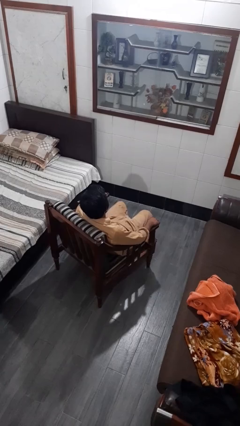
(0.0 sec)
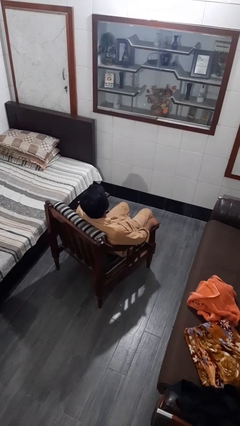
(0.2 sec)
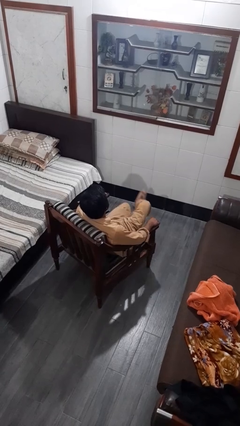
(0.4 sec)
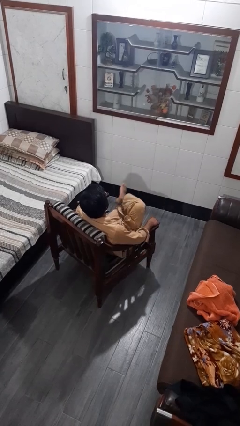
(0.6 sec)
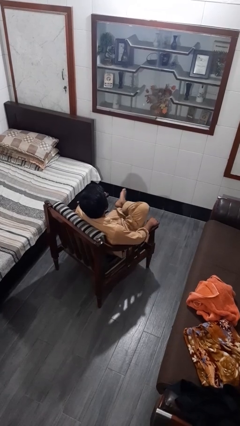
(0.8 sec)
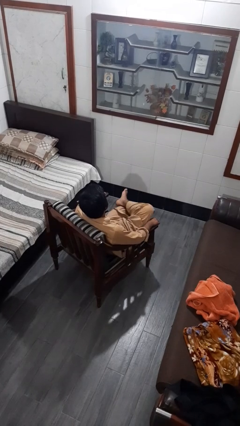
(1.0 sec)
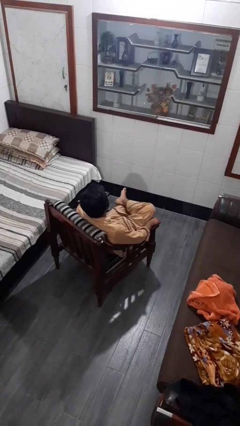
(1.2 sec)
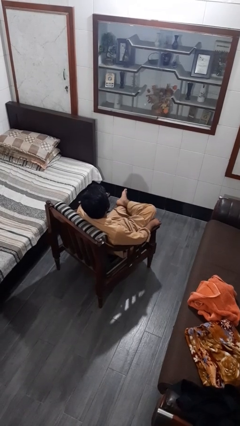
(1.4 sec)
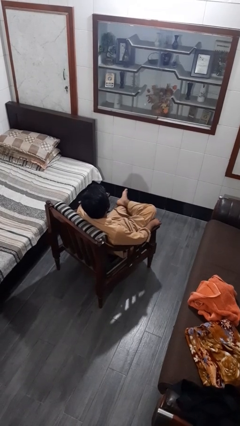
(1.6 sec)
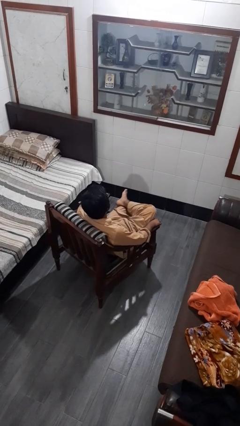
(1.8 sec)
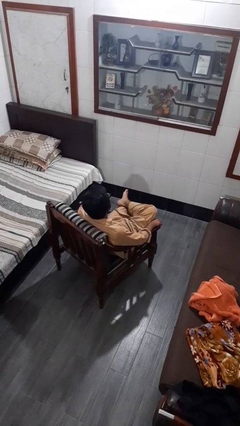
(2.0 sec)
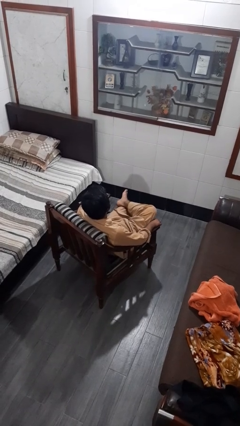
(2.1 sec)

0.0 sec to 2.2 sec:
person crosses legs

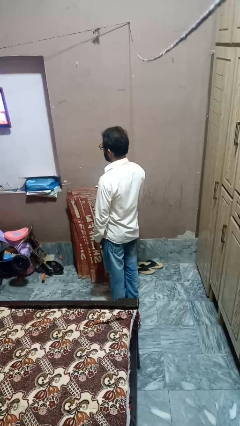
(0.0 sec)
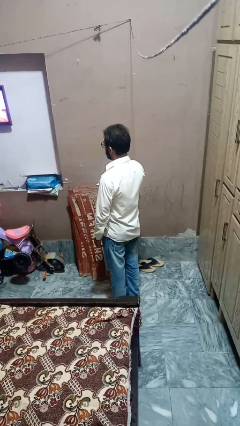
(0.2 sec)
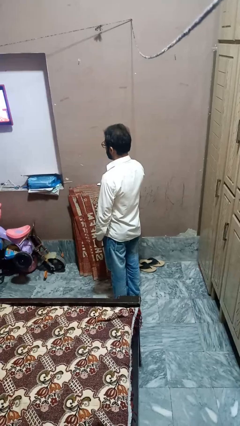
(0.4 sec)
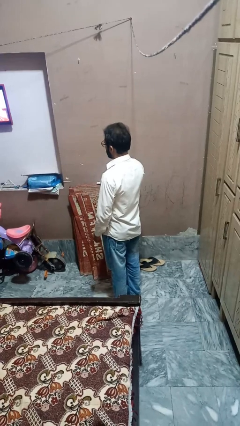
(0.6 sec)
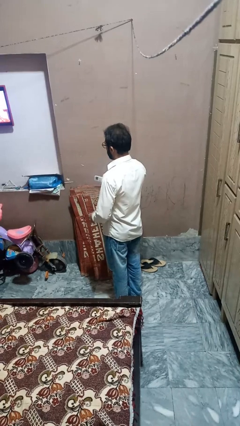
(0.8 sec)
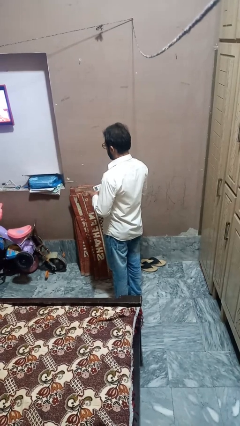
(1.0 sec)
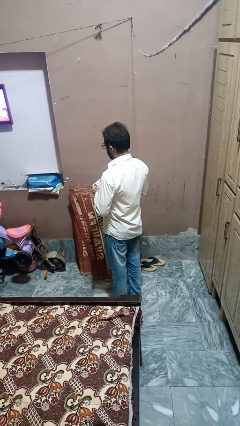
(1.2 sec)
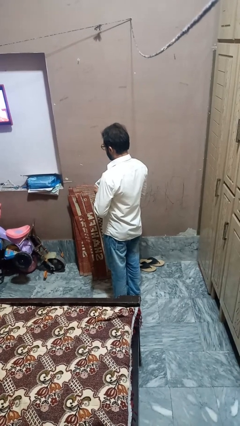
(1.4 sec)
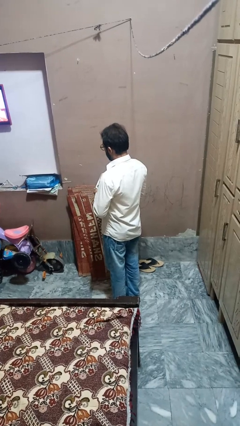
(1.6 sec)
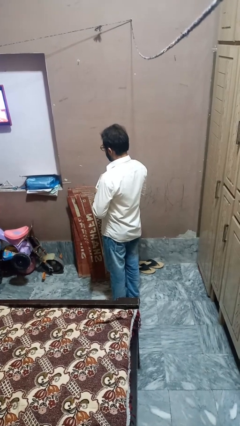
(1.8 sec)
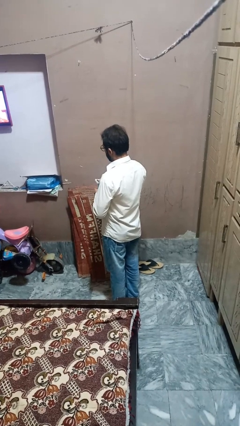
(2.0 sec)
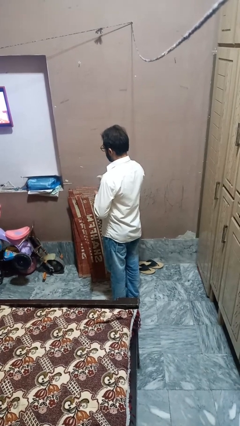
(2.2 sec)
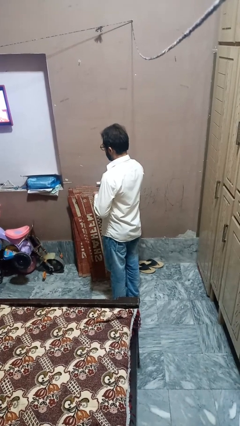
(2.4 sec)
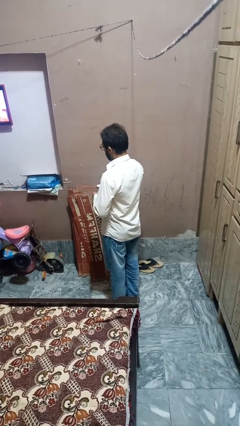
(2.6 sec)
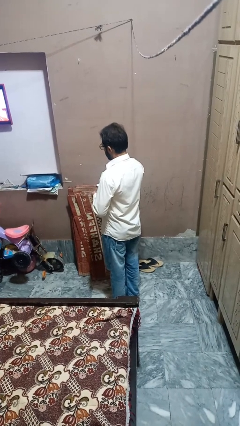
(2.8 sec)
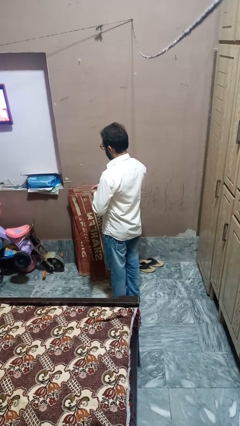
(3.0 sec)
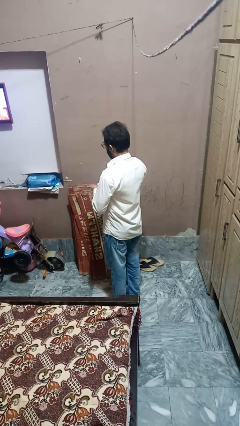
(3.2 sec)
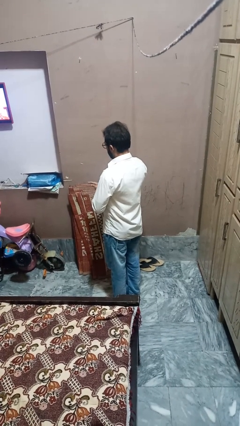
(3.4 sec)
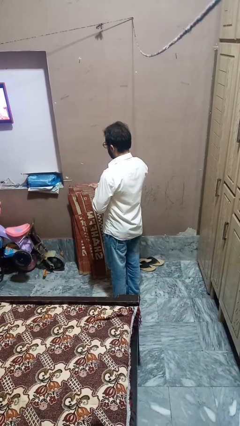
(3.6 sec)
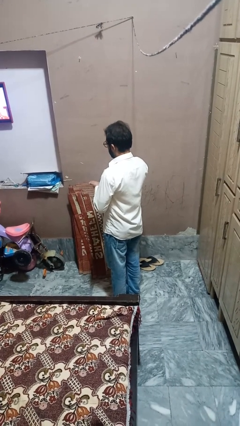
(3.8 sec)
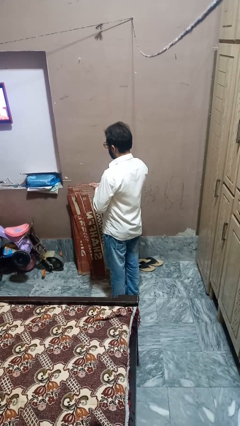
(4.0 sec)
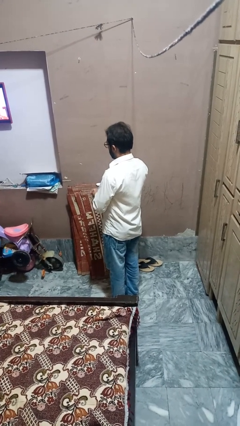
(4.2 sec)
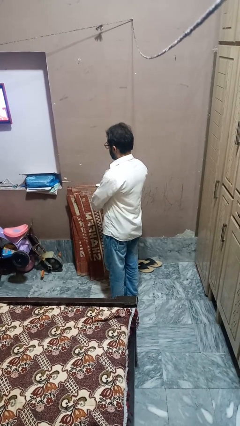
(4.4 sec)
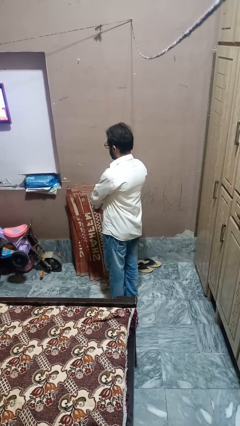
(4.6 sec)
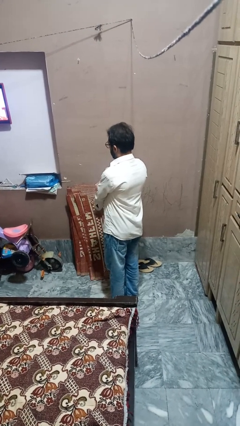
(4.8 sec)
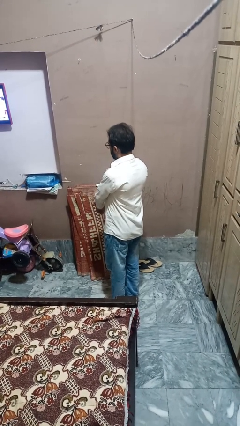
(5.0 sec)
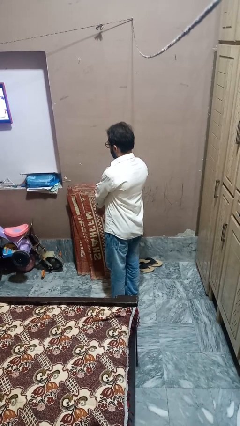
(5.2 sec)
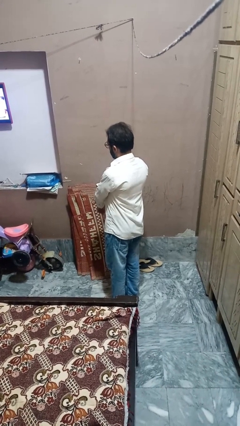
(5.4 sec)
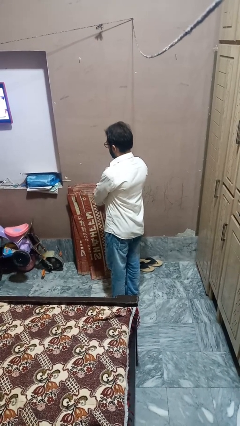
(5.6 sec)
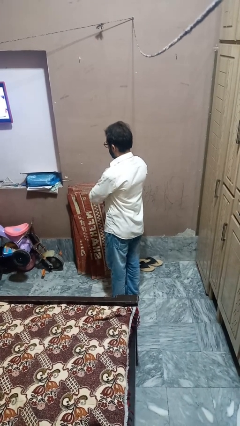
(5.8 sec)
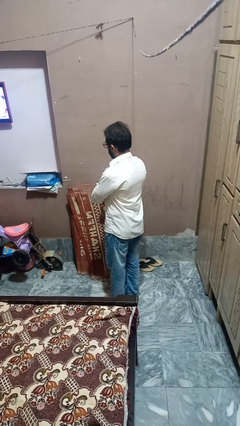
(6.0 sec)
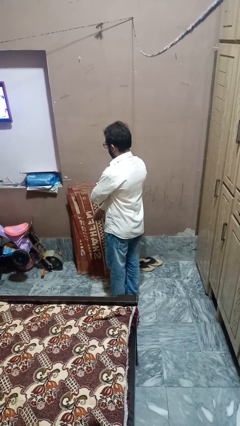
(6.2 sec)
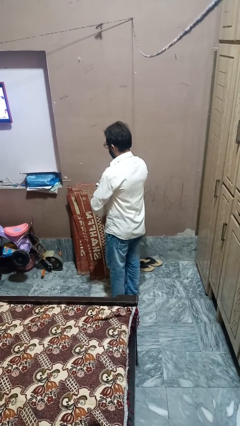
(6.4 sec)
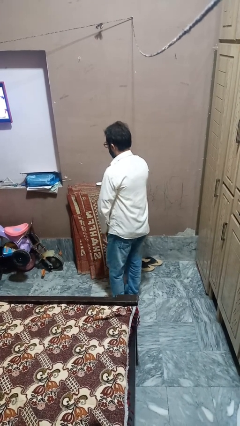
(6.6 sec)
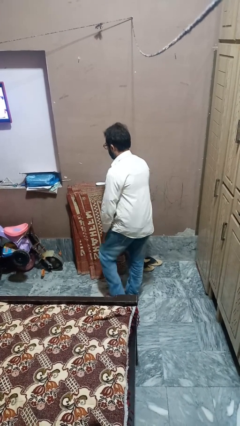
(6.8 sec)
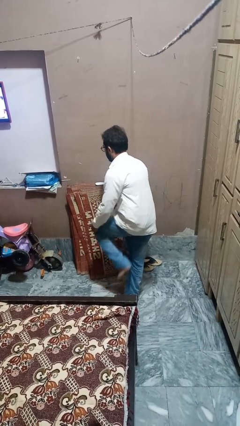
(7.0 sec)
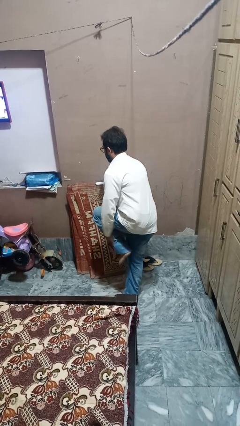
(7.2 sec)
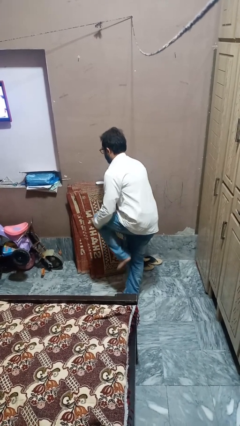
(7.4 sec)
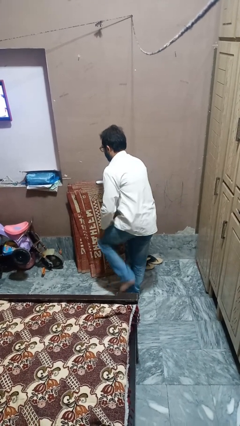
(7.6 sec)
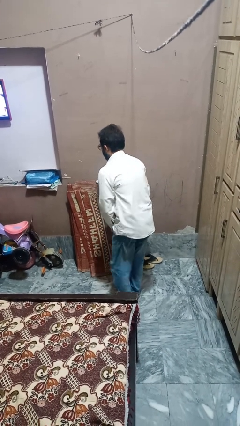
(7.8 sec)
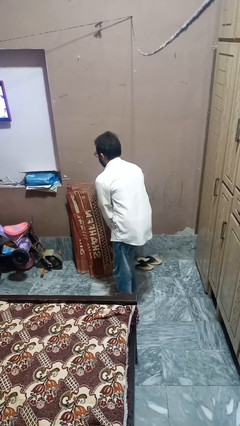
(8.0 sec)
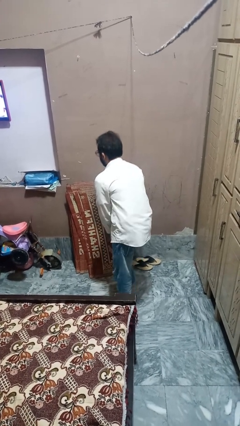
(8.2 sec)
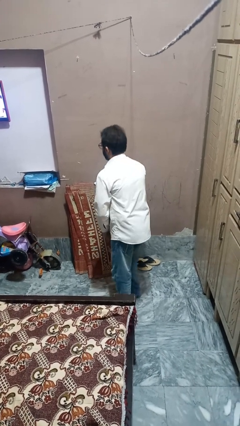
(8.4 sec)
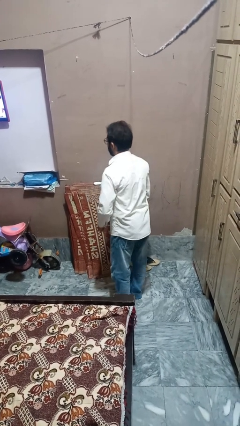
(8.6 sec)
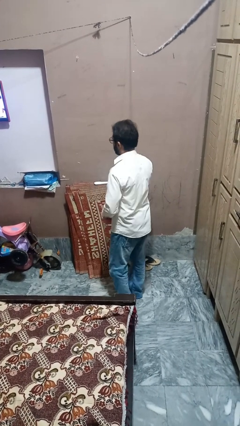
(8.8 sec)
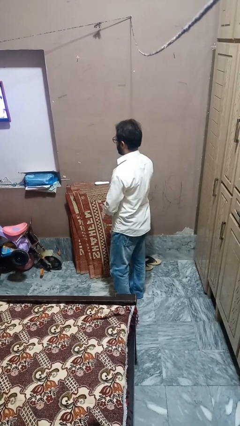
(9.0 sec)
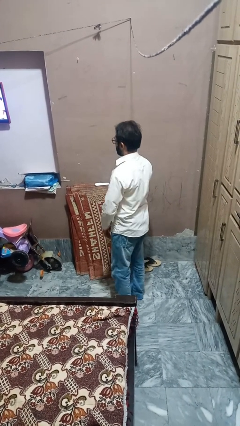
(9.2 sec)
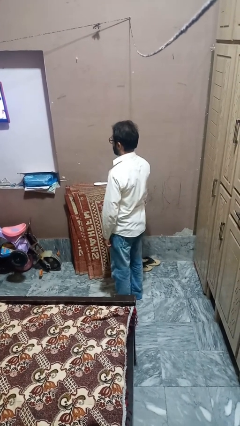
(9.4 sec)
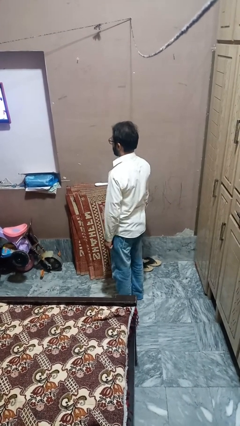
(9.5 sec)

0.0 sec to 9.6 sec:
person applies sunscreen

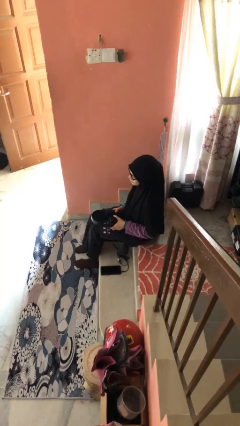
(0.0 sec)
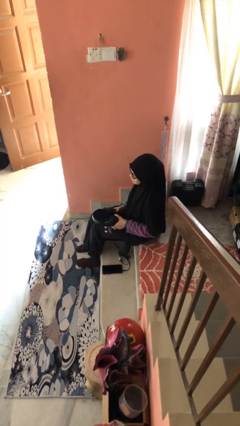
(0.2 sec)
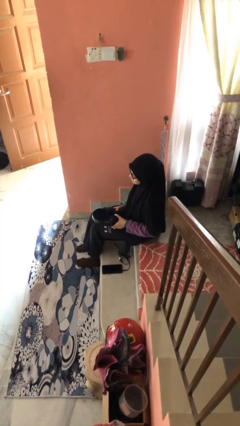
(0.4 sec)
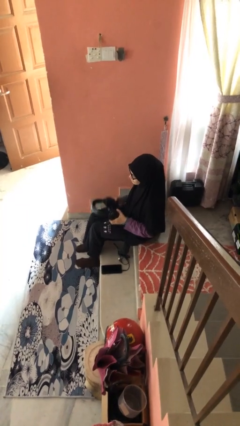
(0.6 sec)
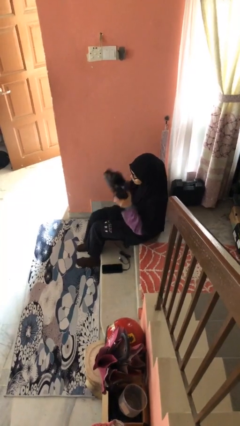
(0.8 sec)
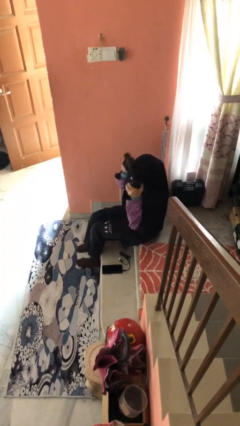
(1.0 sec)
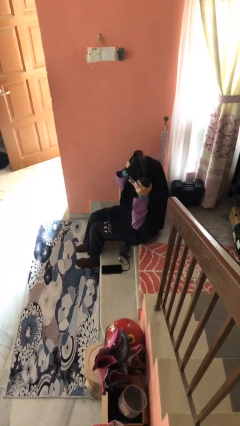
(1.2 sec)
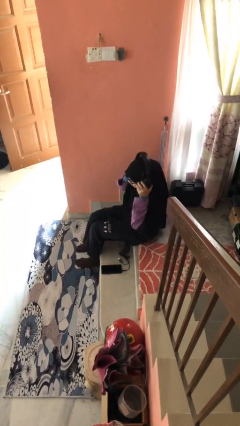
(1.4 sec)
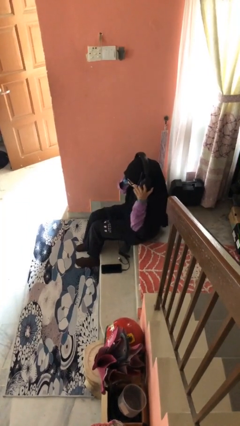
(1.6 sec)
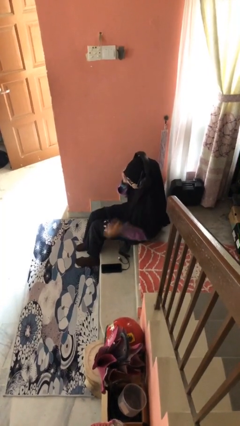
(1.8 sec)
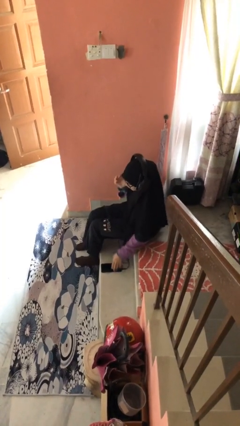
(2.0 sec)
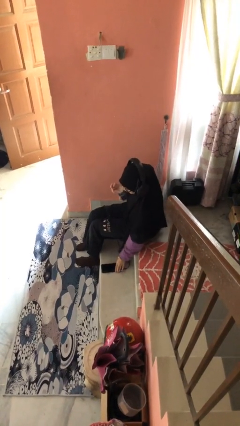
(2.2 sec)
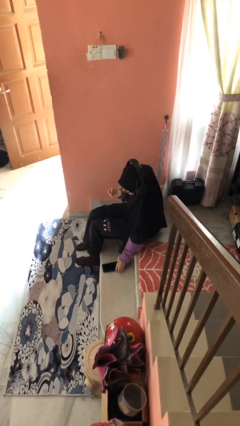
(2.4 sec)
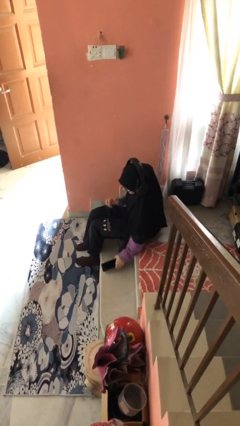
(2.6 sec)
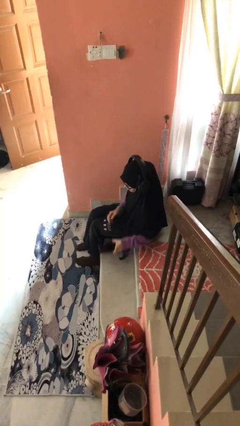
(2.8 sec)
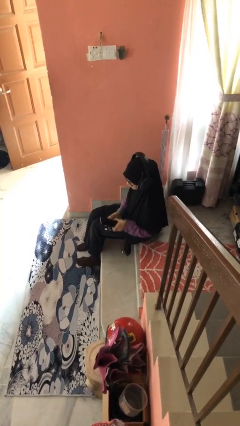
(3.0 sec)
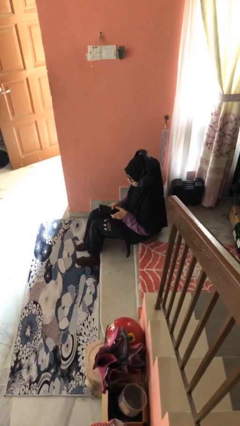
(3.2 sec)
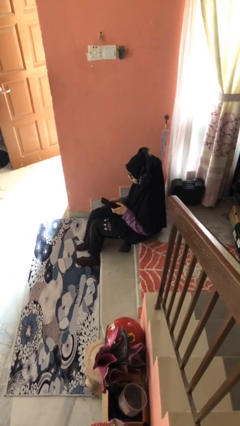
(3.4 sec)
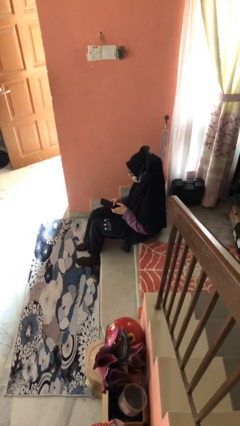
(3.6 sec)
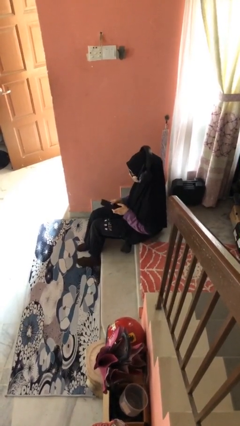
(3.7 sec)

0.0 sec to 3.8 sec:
person puts on headphones

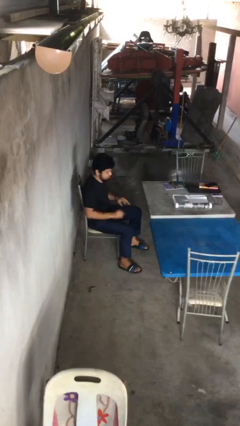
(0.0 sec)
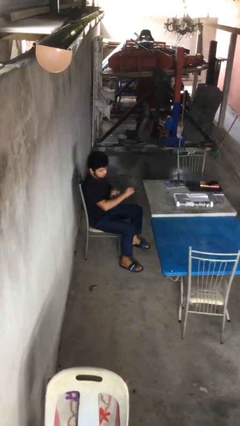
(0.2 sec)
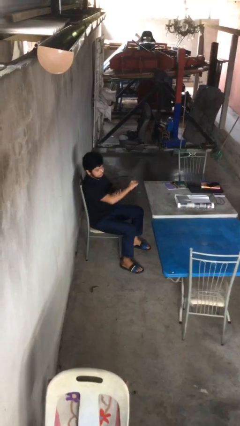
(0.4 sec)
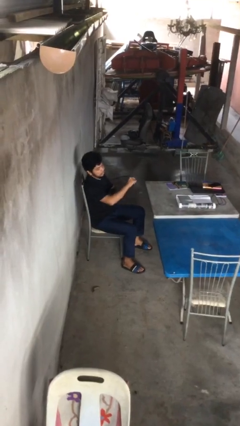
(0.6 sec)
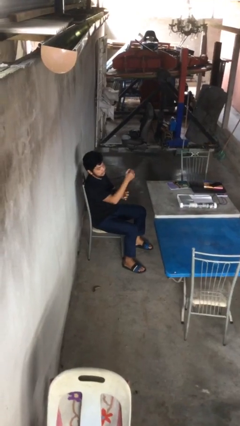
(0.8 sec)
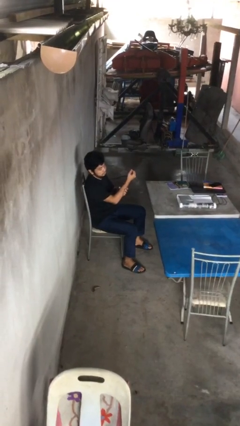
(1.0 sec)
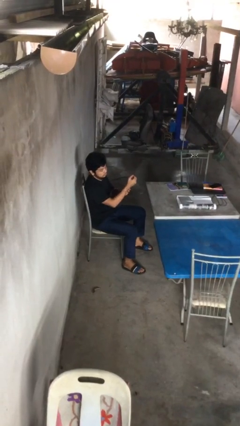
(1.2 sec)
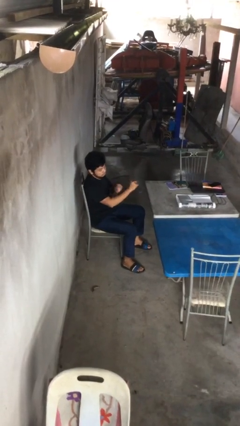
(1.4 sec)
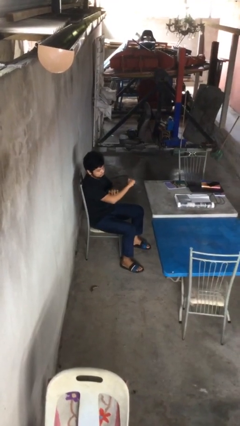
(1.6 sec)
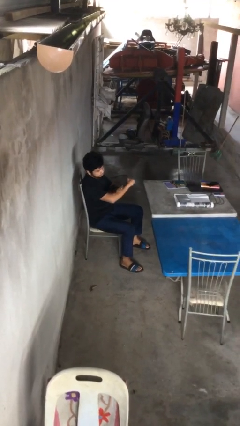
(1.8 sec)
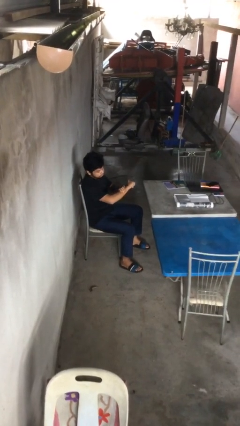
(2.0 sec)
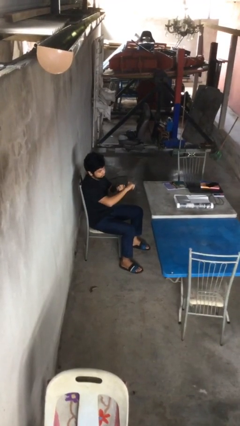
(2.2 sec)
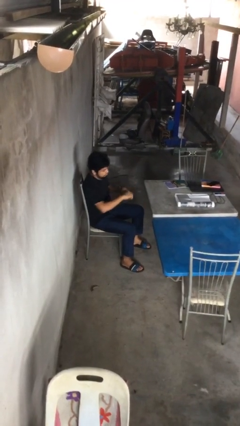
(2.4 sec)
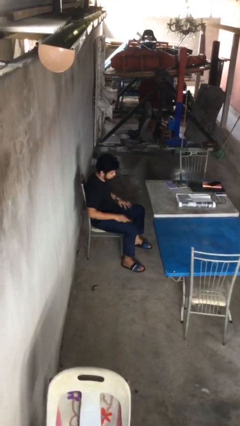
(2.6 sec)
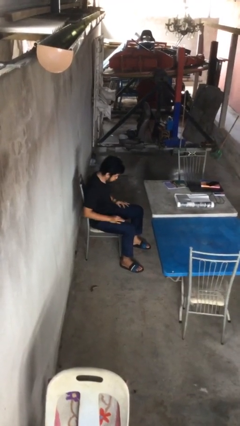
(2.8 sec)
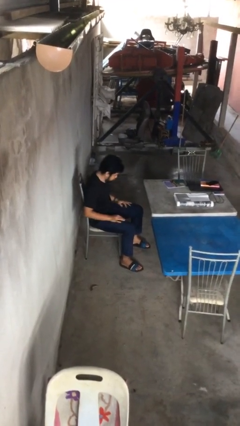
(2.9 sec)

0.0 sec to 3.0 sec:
person looks at hands in lap
